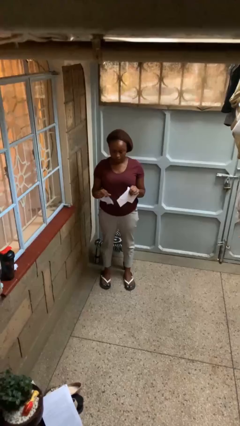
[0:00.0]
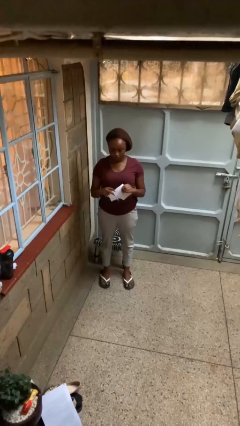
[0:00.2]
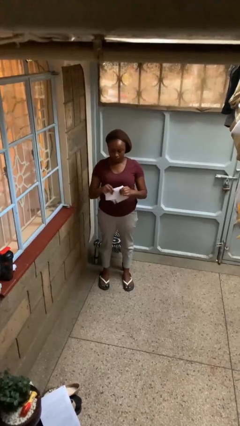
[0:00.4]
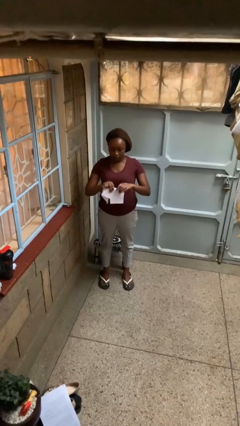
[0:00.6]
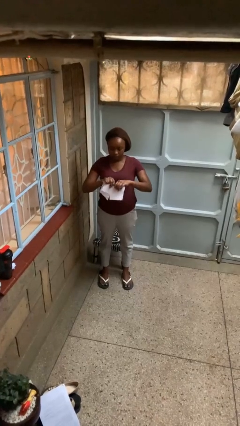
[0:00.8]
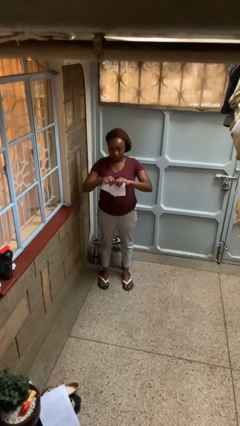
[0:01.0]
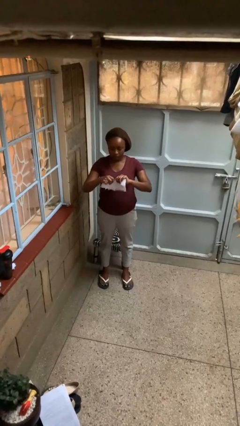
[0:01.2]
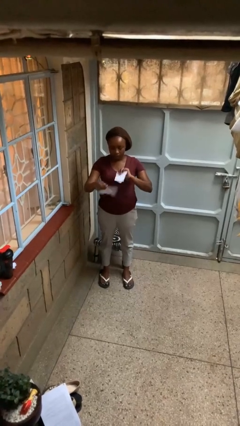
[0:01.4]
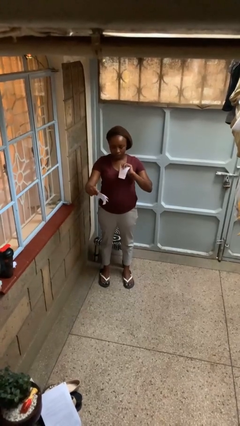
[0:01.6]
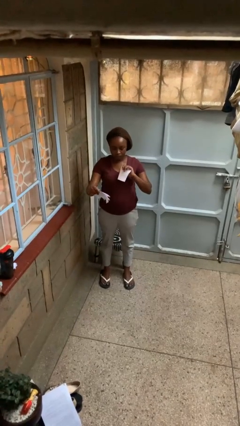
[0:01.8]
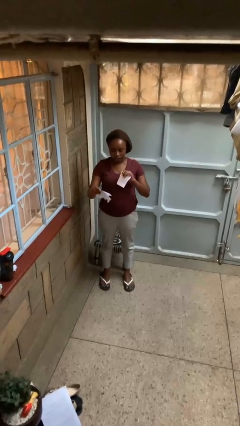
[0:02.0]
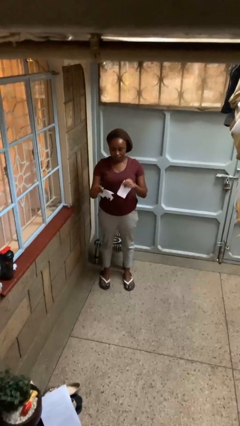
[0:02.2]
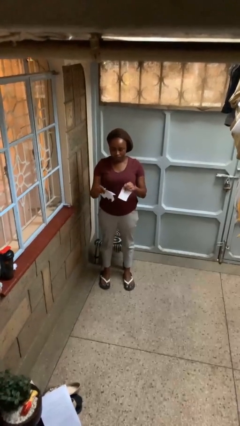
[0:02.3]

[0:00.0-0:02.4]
person tears paper

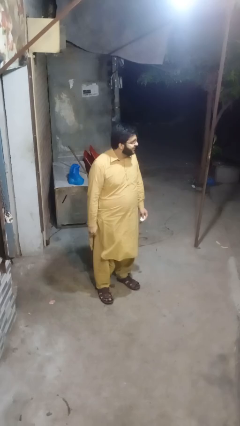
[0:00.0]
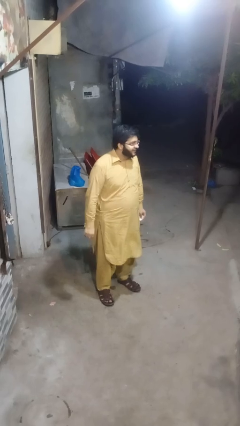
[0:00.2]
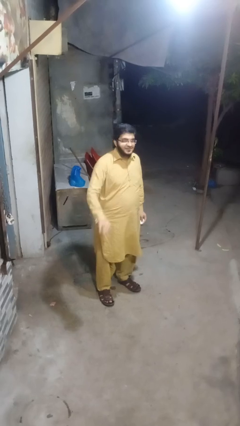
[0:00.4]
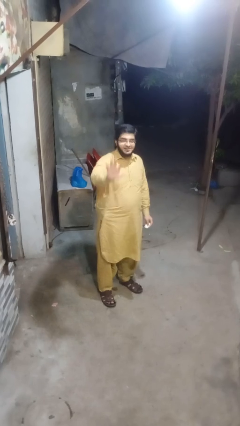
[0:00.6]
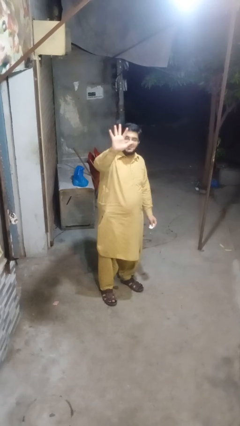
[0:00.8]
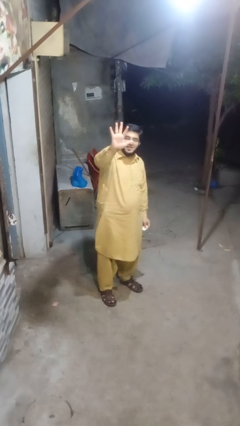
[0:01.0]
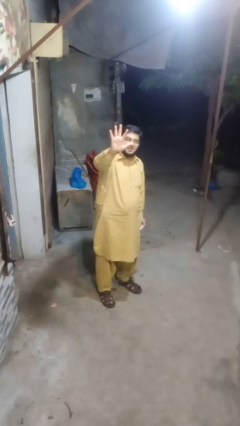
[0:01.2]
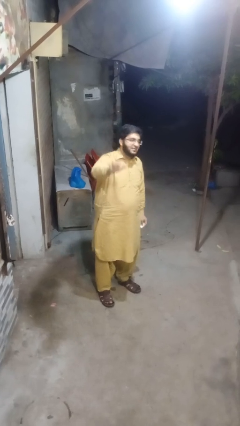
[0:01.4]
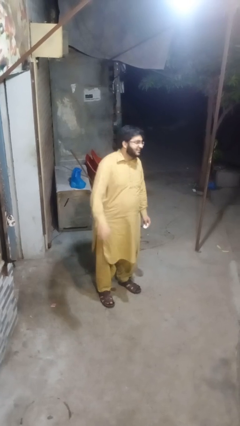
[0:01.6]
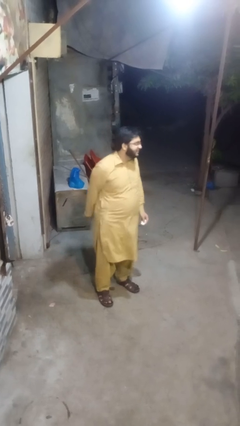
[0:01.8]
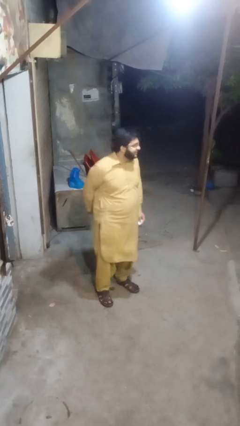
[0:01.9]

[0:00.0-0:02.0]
person gestures number five

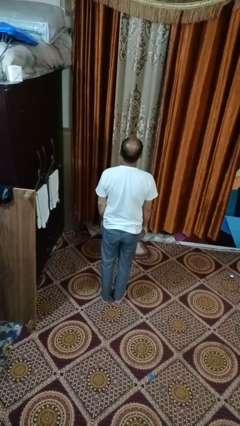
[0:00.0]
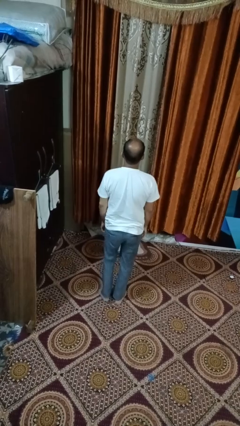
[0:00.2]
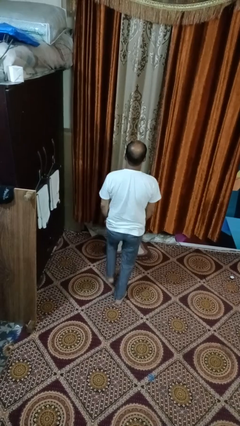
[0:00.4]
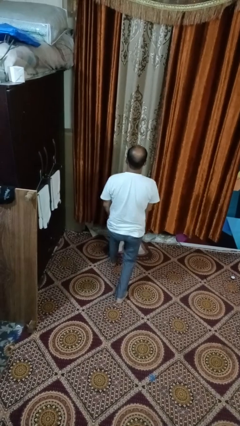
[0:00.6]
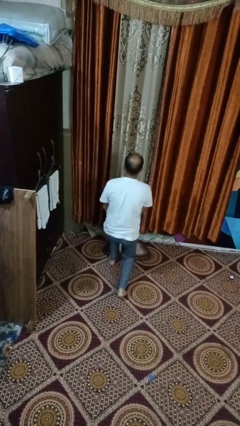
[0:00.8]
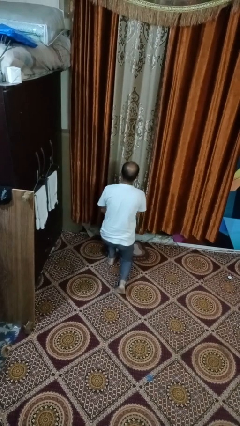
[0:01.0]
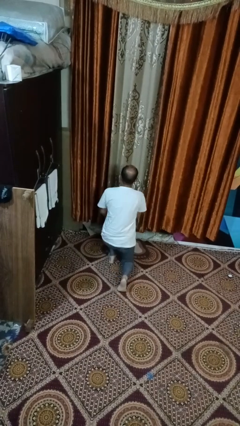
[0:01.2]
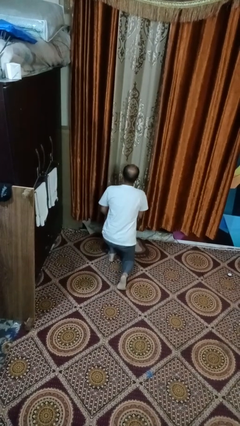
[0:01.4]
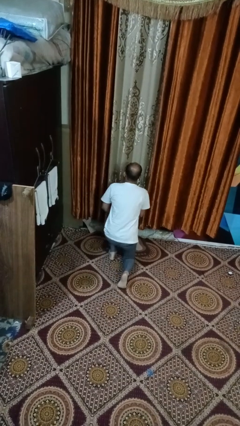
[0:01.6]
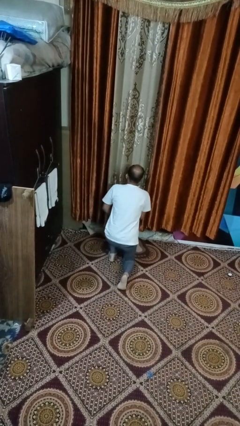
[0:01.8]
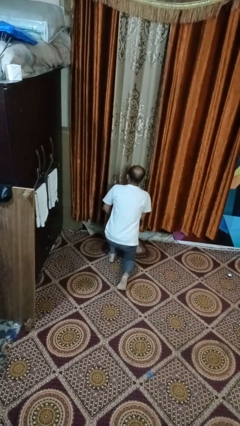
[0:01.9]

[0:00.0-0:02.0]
person kneels

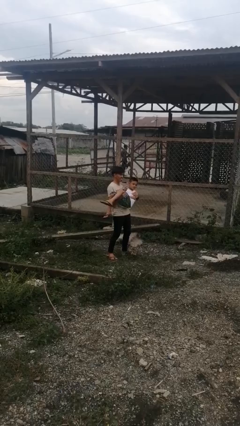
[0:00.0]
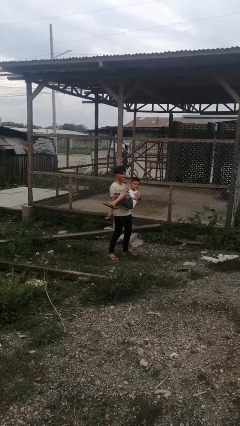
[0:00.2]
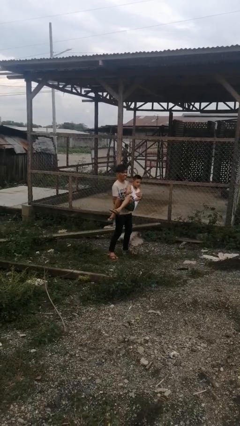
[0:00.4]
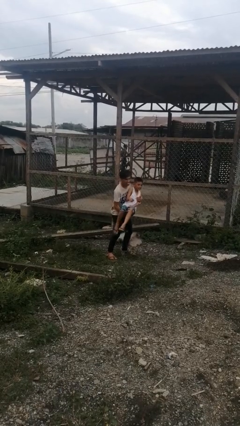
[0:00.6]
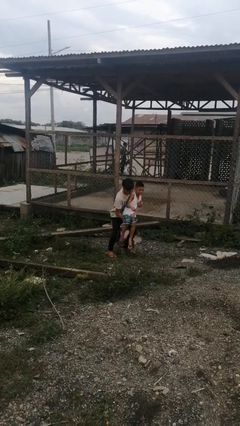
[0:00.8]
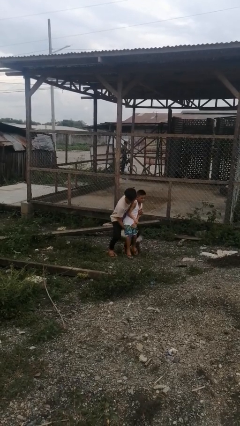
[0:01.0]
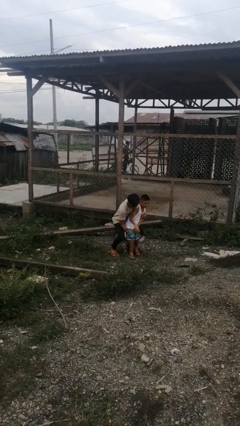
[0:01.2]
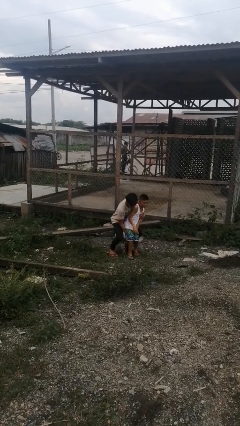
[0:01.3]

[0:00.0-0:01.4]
person puts down person

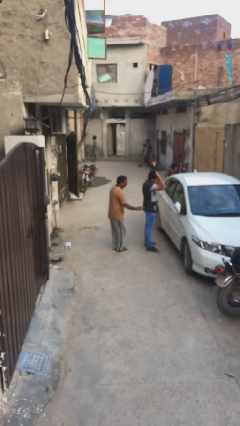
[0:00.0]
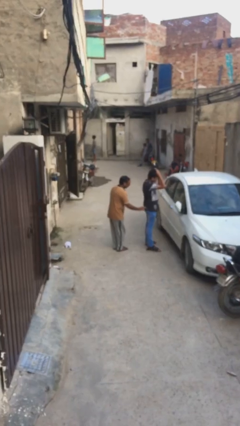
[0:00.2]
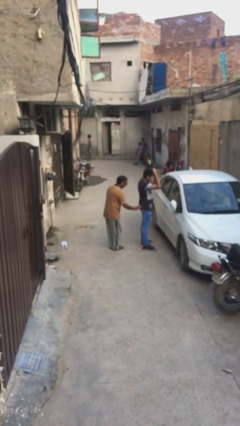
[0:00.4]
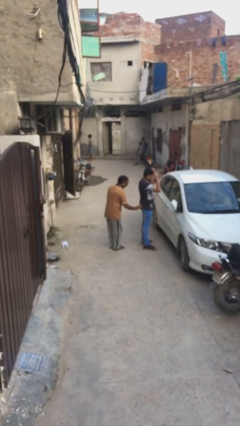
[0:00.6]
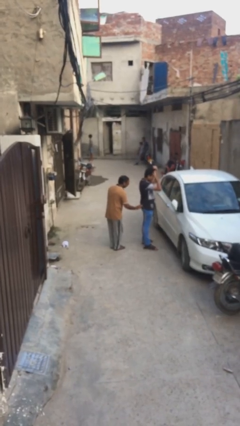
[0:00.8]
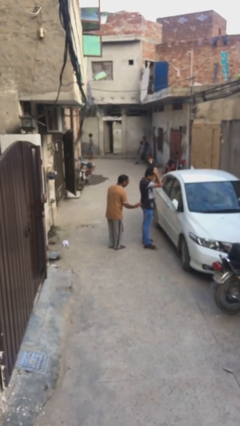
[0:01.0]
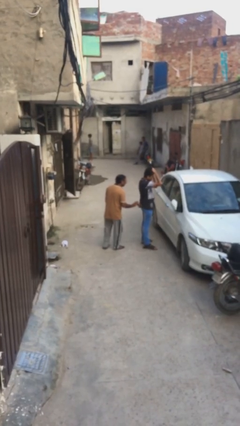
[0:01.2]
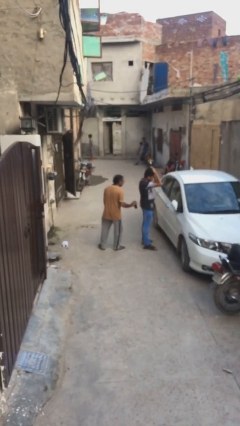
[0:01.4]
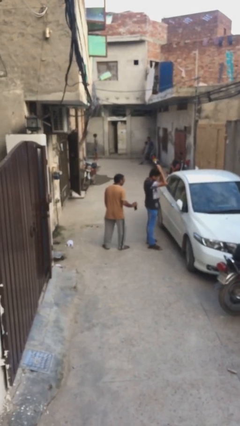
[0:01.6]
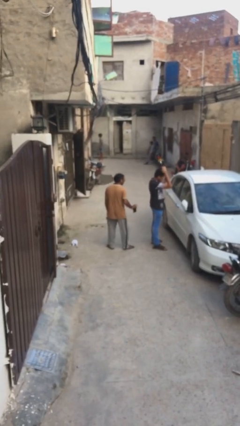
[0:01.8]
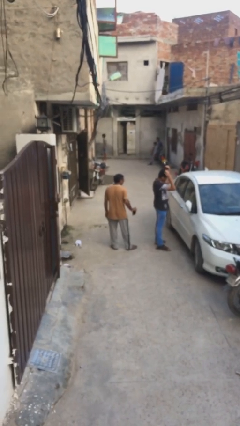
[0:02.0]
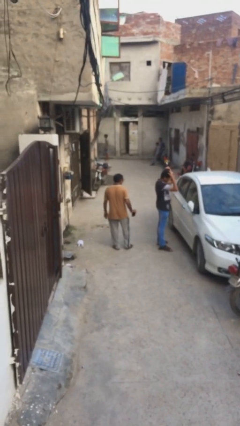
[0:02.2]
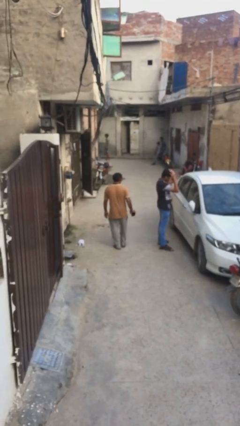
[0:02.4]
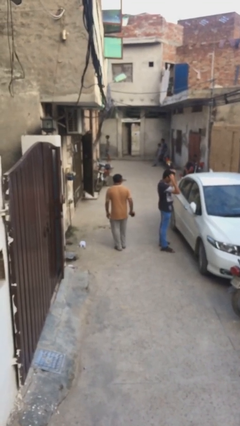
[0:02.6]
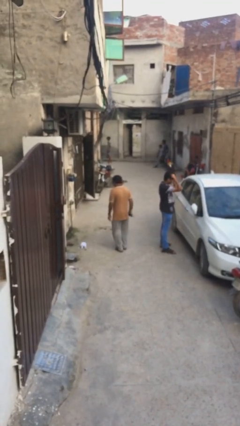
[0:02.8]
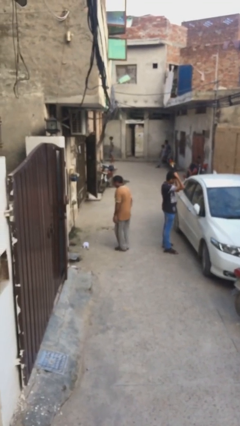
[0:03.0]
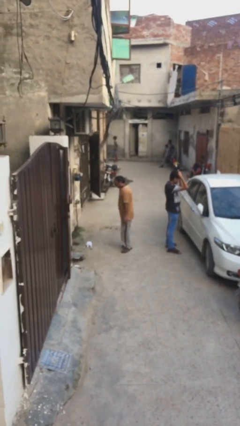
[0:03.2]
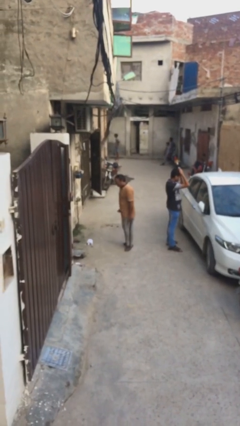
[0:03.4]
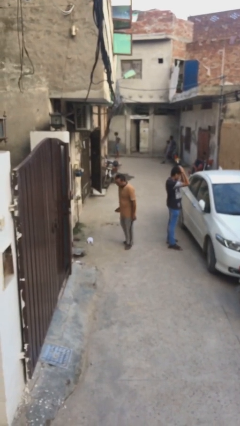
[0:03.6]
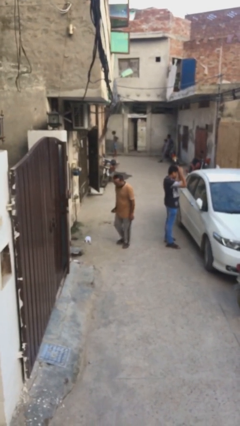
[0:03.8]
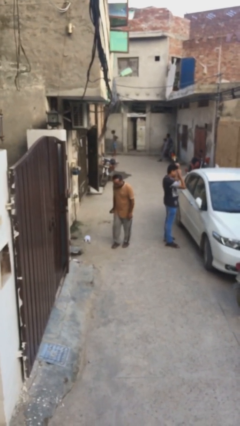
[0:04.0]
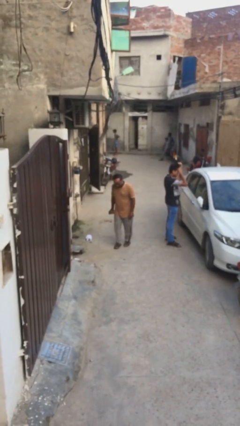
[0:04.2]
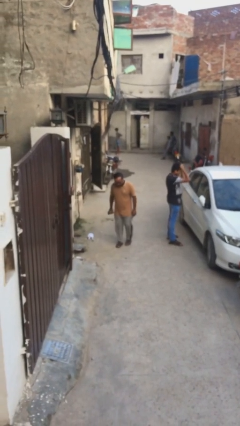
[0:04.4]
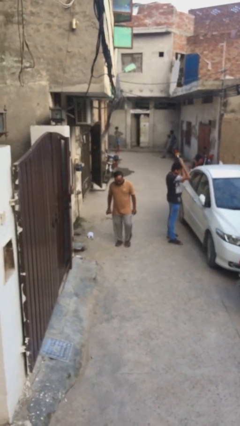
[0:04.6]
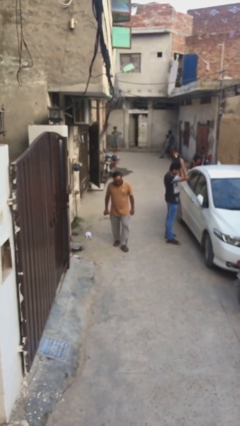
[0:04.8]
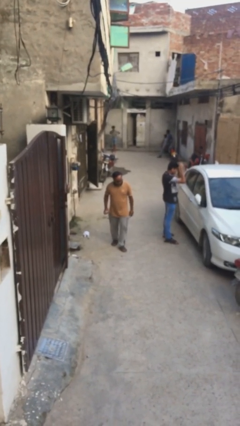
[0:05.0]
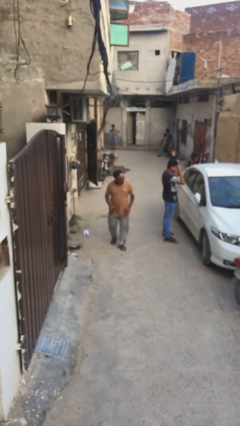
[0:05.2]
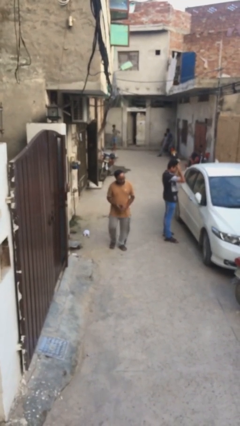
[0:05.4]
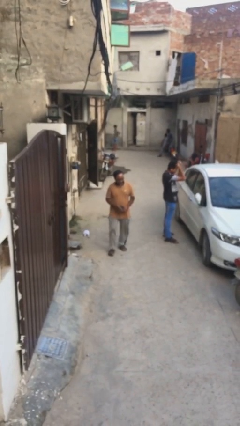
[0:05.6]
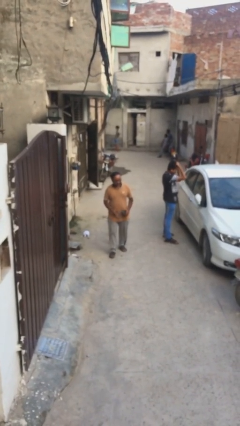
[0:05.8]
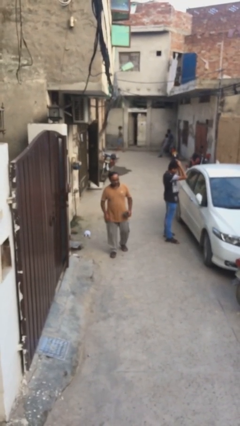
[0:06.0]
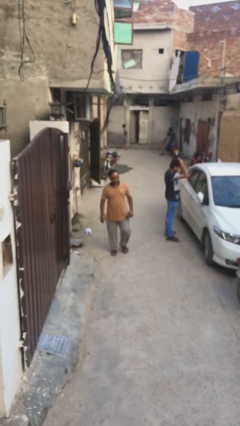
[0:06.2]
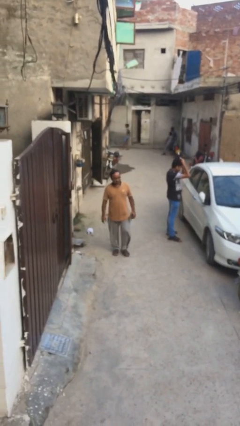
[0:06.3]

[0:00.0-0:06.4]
person steals object from person

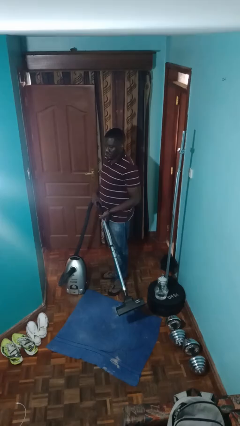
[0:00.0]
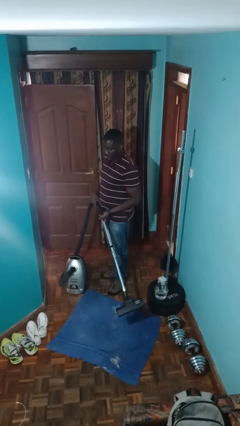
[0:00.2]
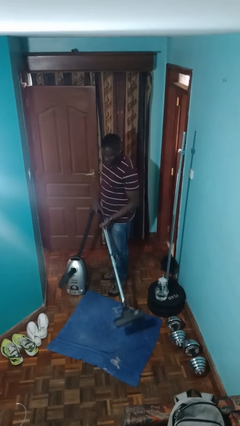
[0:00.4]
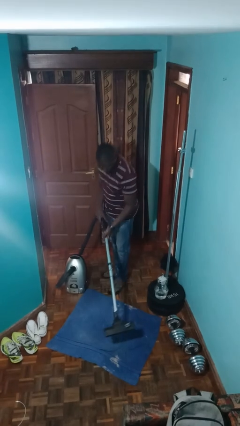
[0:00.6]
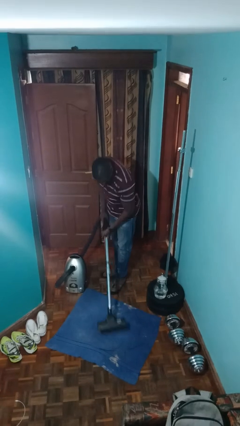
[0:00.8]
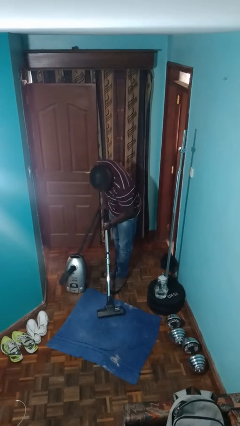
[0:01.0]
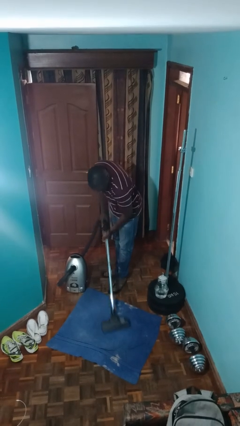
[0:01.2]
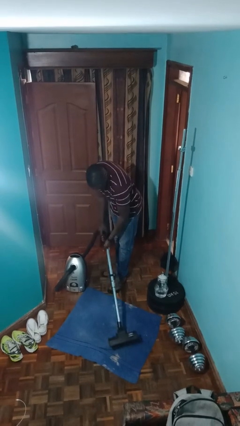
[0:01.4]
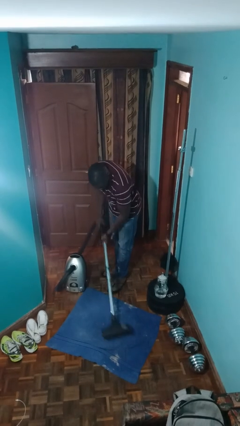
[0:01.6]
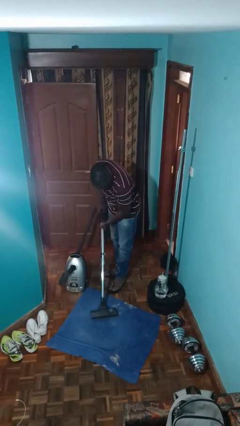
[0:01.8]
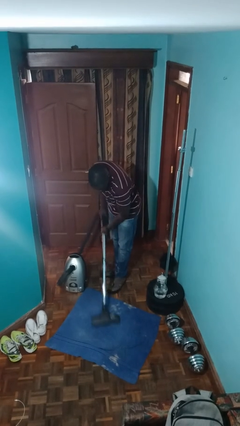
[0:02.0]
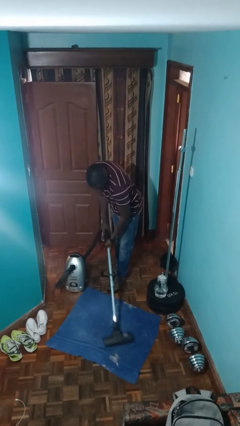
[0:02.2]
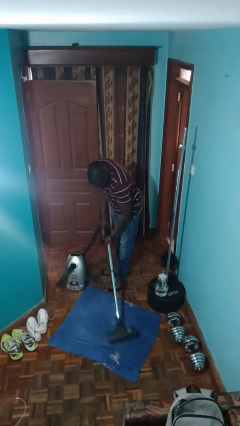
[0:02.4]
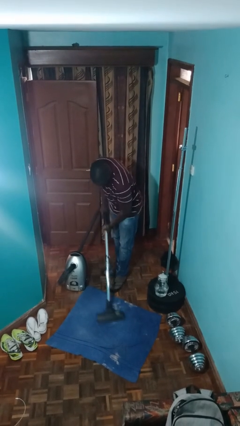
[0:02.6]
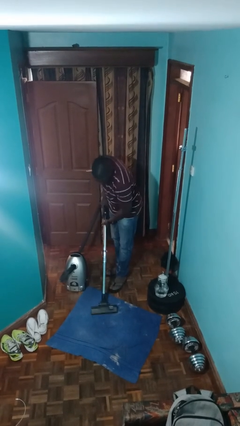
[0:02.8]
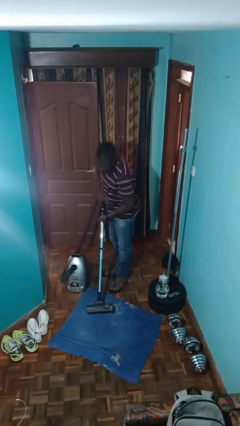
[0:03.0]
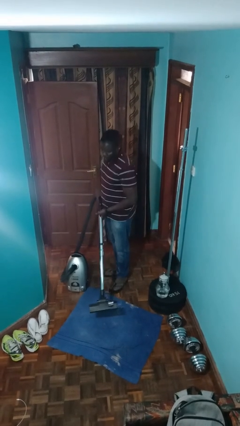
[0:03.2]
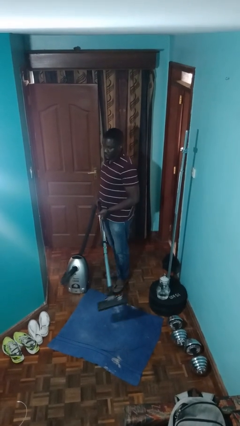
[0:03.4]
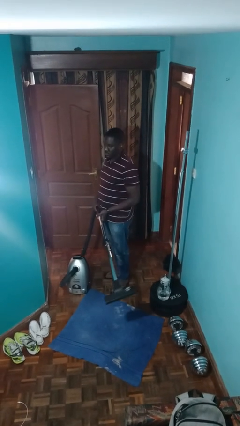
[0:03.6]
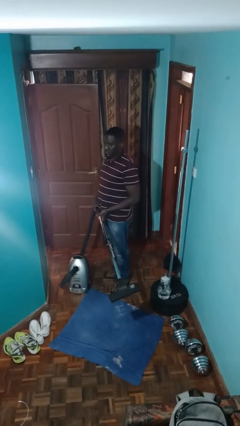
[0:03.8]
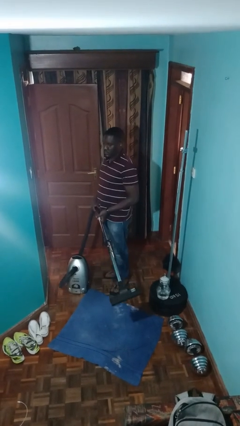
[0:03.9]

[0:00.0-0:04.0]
person vacuums carpet
